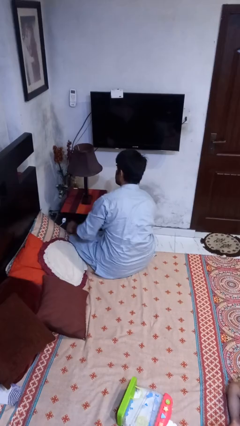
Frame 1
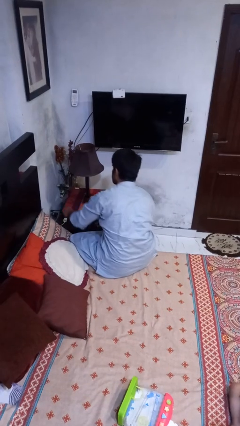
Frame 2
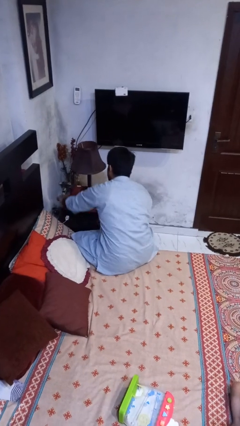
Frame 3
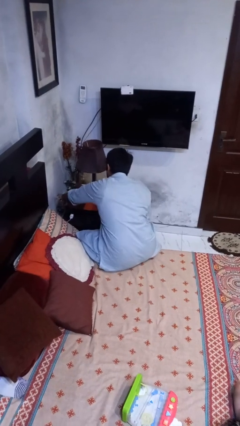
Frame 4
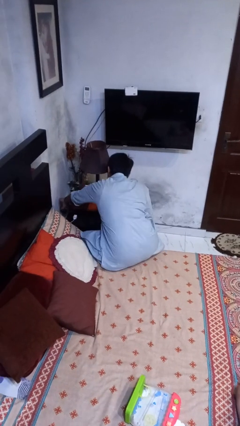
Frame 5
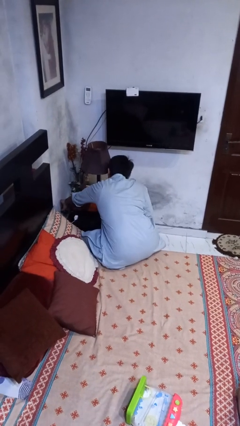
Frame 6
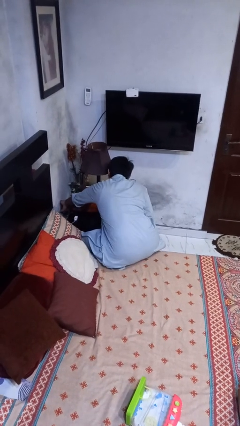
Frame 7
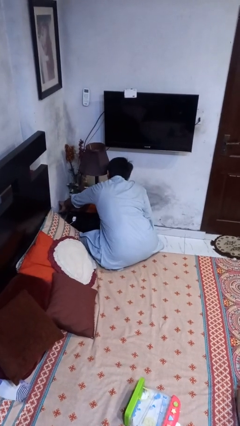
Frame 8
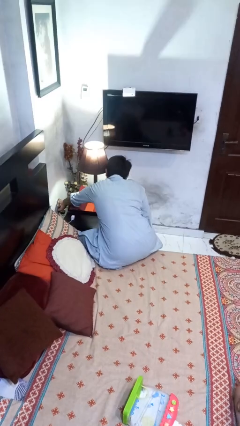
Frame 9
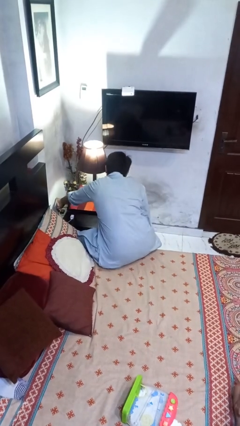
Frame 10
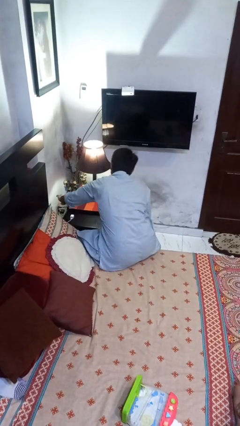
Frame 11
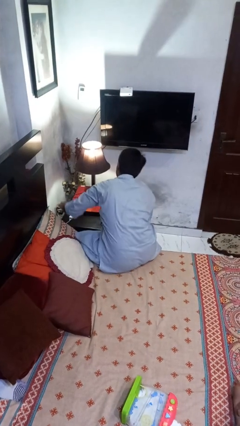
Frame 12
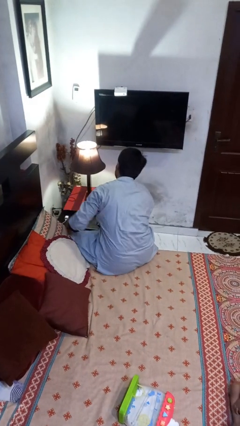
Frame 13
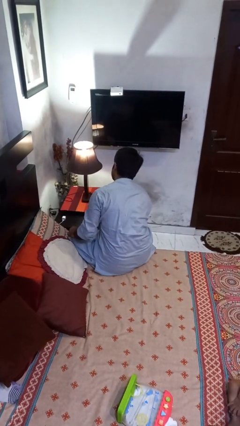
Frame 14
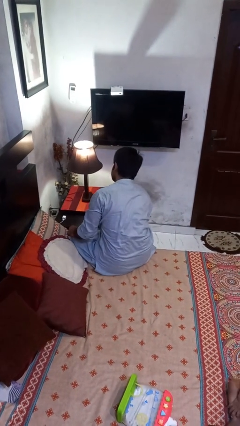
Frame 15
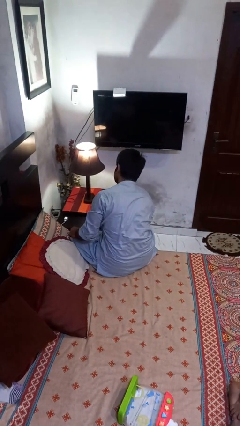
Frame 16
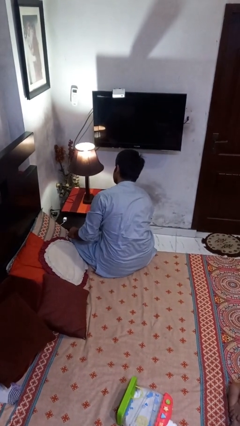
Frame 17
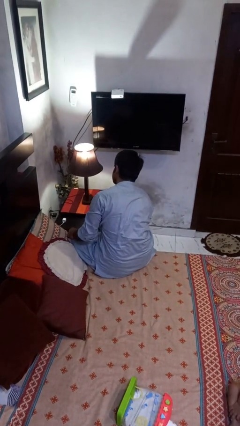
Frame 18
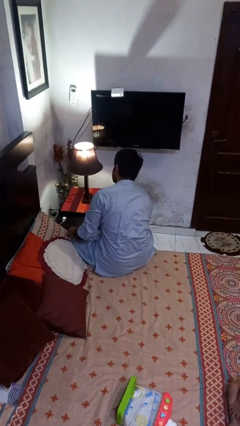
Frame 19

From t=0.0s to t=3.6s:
person turns on lamp

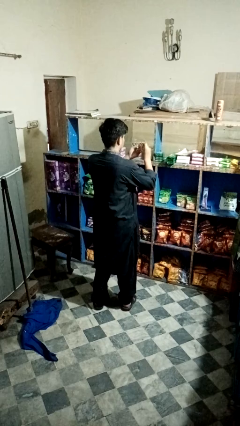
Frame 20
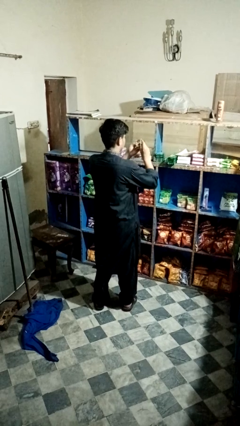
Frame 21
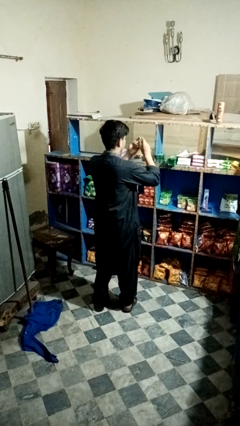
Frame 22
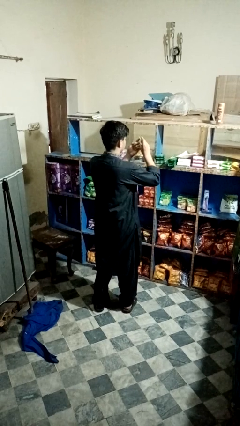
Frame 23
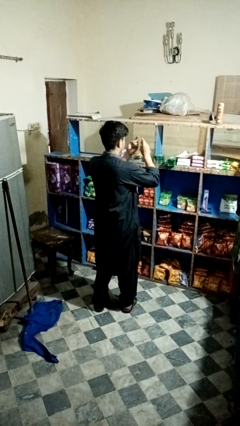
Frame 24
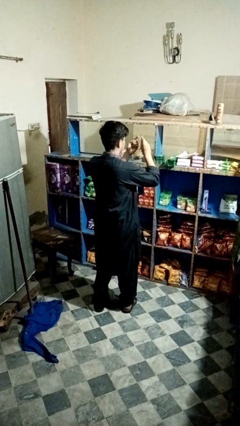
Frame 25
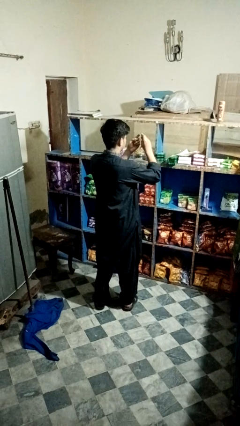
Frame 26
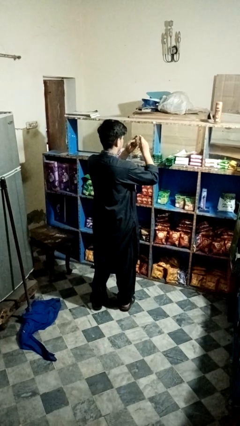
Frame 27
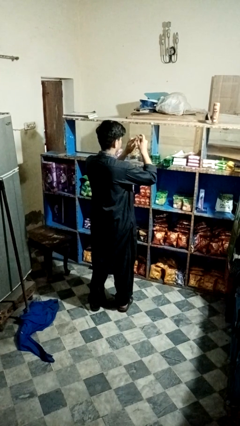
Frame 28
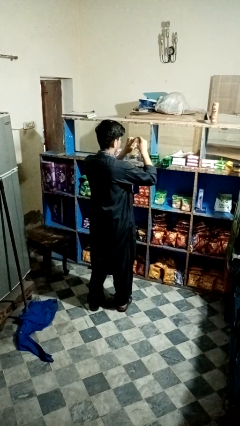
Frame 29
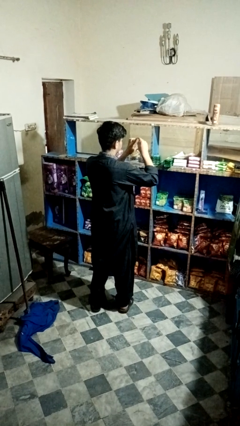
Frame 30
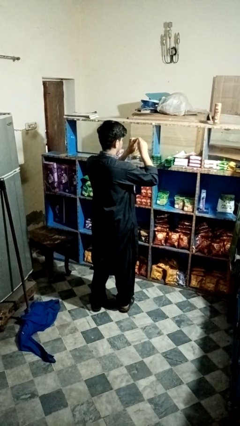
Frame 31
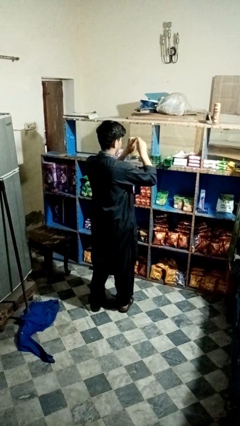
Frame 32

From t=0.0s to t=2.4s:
person files fingernails

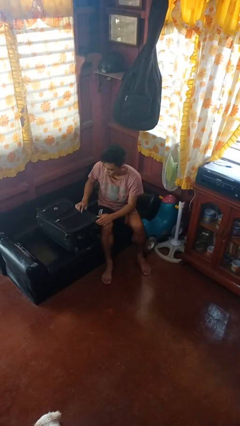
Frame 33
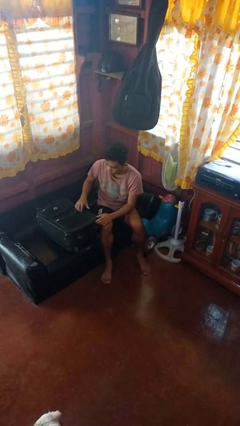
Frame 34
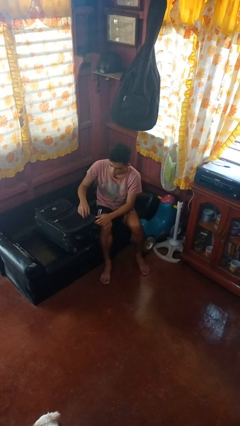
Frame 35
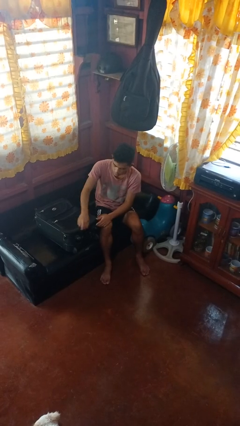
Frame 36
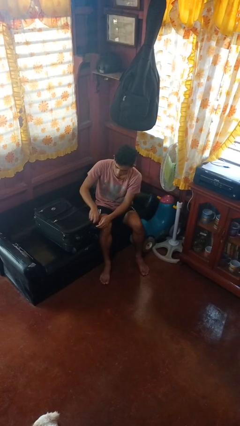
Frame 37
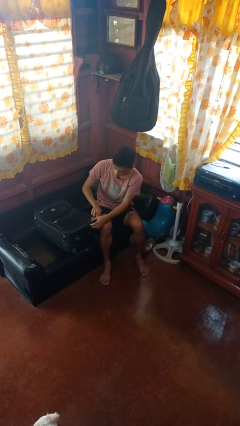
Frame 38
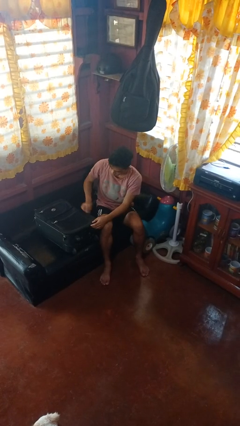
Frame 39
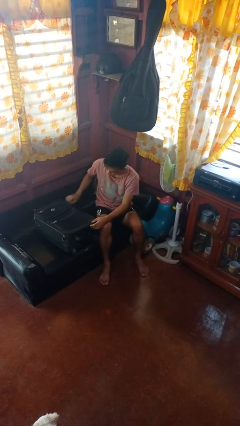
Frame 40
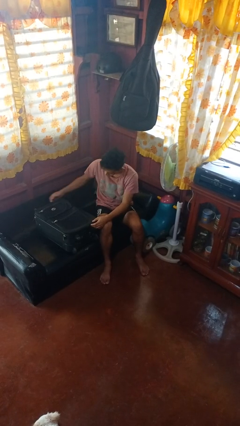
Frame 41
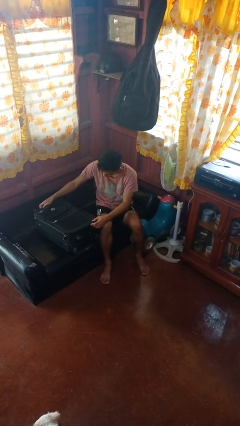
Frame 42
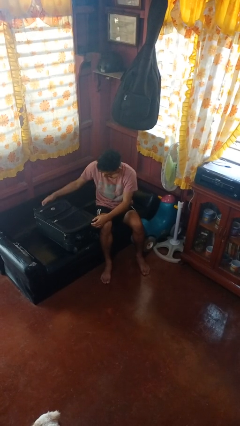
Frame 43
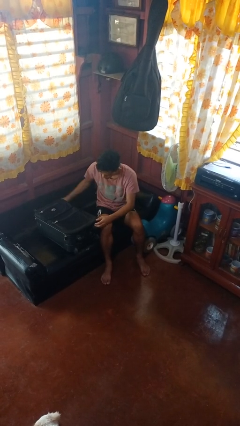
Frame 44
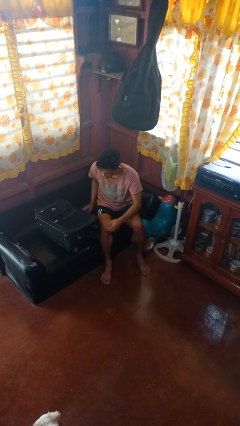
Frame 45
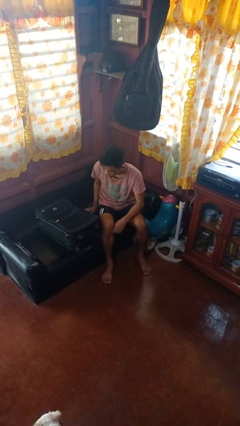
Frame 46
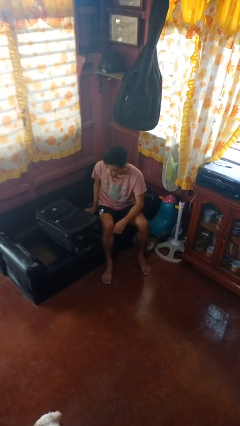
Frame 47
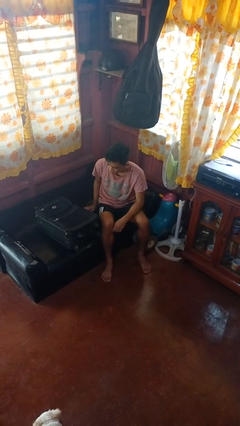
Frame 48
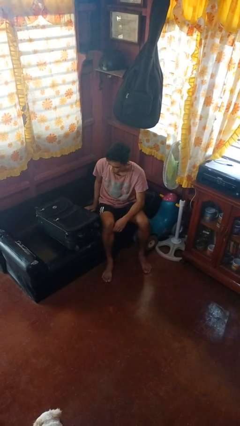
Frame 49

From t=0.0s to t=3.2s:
person closes suitcase

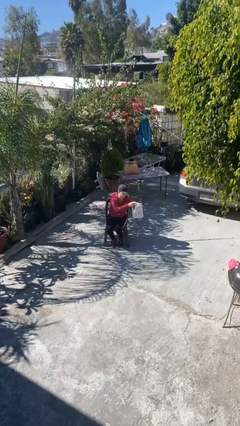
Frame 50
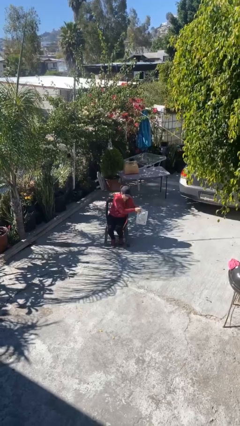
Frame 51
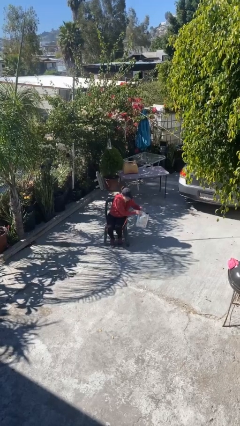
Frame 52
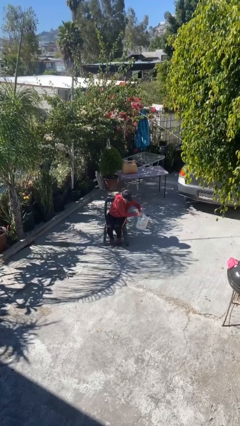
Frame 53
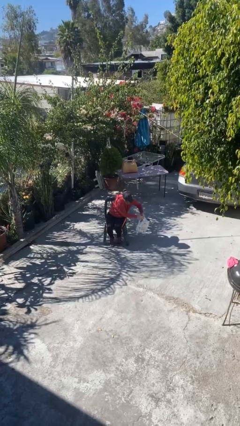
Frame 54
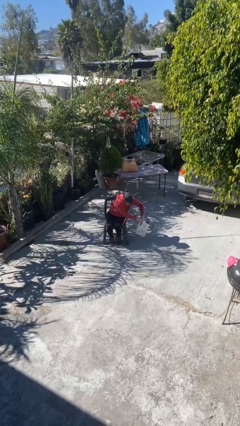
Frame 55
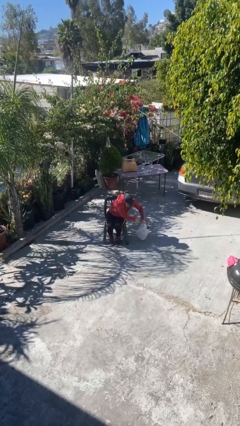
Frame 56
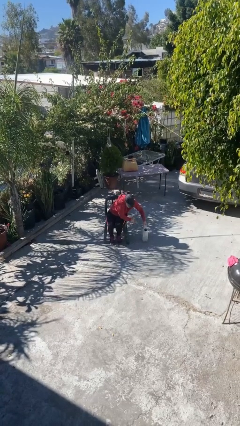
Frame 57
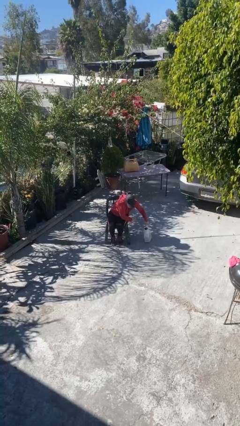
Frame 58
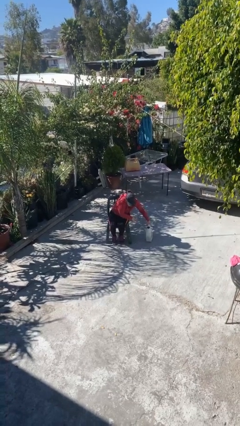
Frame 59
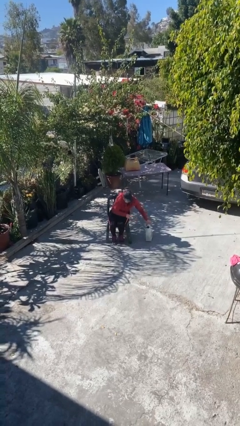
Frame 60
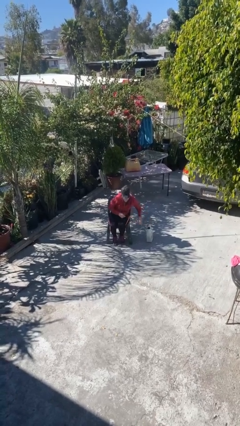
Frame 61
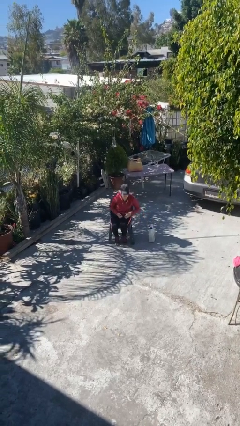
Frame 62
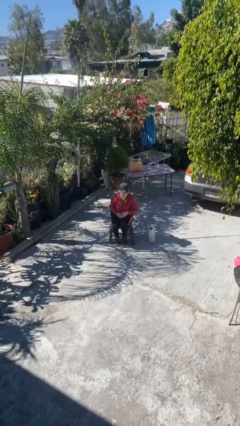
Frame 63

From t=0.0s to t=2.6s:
person puts down object on floor

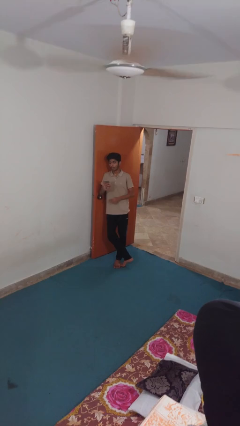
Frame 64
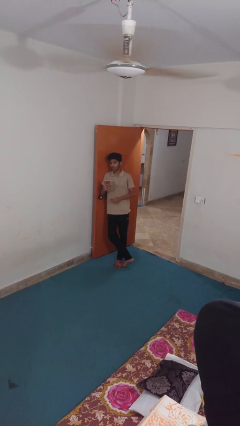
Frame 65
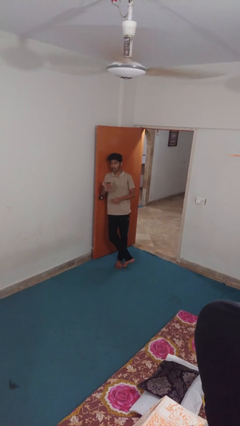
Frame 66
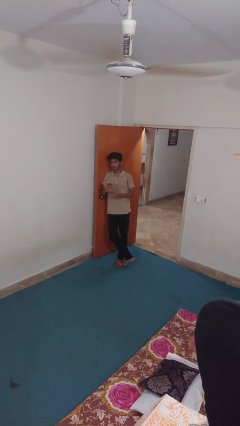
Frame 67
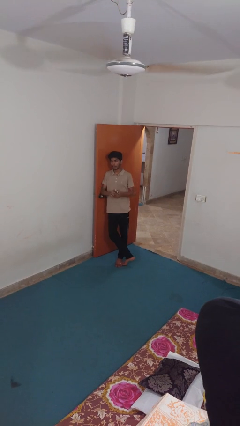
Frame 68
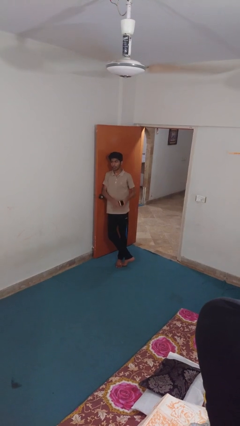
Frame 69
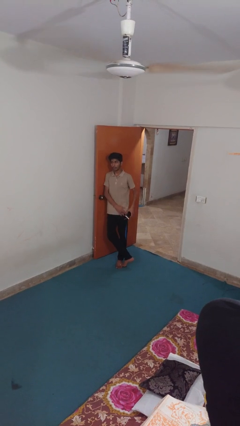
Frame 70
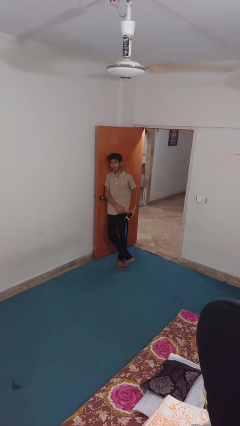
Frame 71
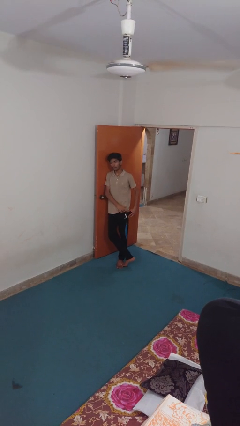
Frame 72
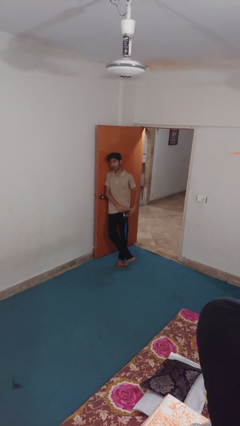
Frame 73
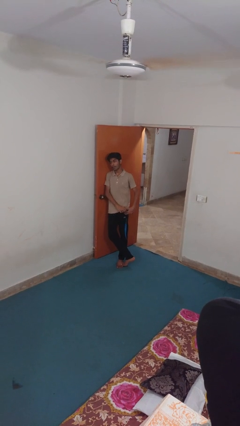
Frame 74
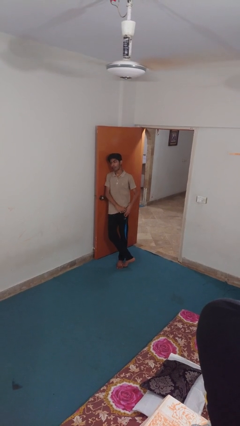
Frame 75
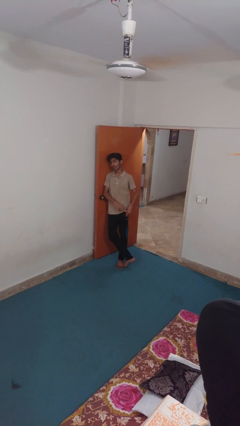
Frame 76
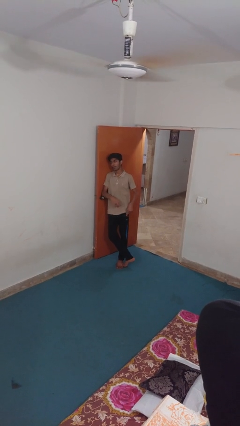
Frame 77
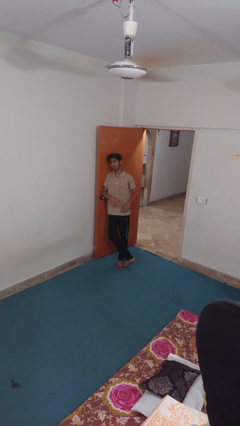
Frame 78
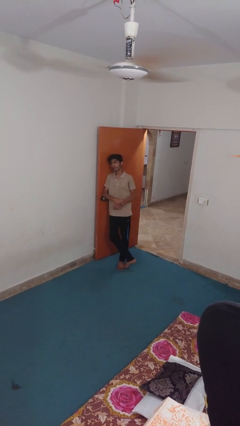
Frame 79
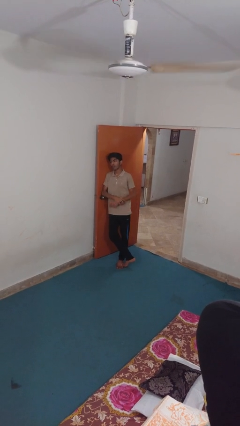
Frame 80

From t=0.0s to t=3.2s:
person puts phone into pocket

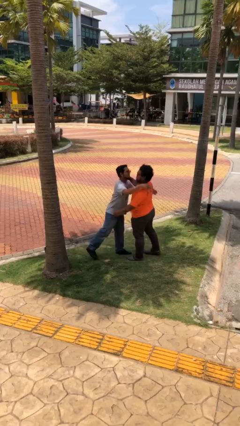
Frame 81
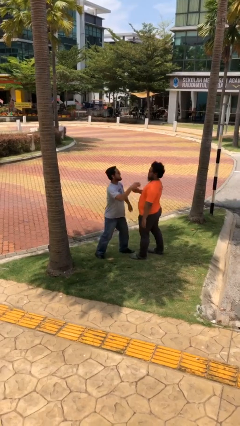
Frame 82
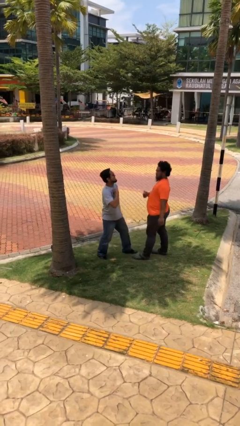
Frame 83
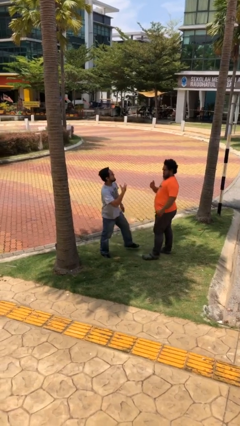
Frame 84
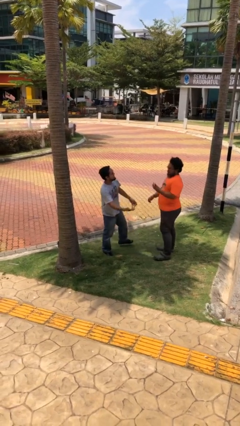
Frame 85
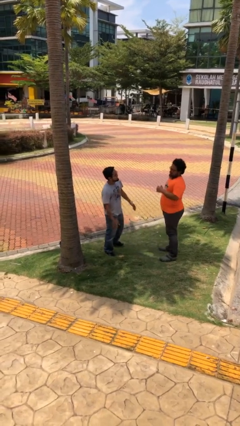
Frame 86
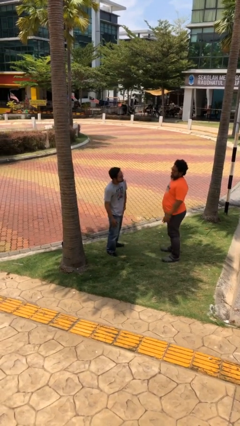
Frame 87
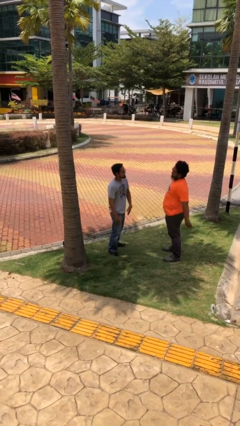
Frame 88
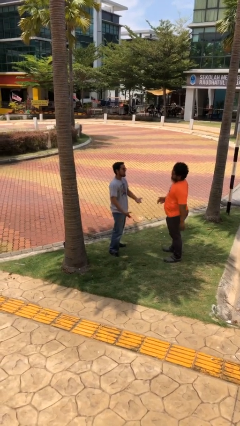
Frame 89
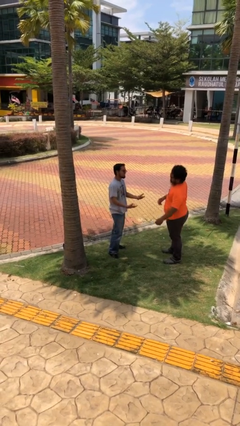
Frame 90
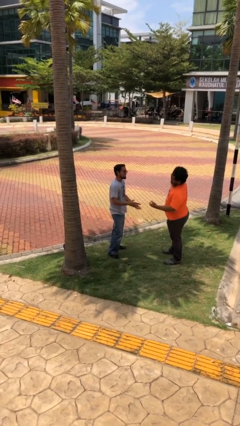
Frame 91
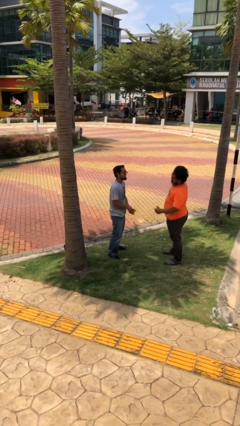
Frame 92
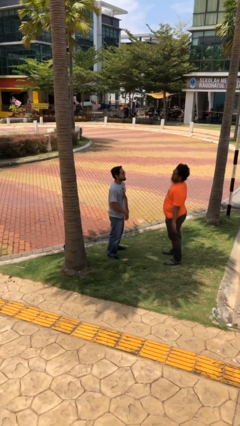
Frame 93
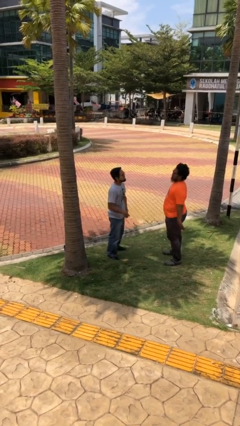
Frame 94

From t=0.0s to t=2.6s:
person talks to person
